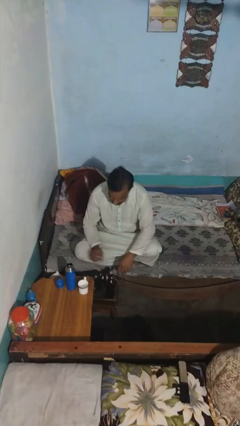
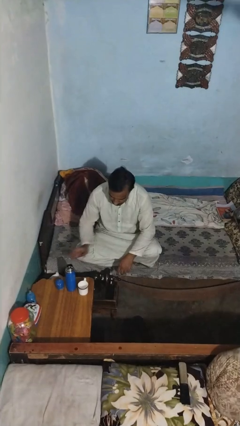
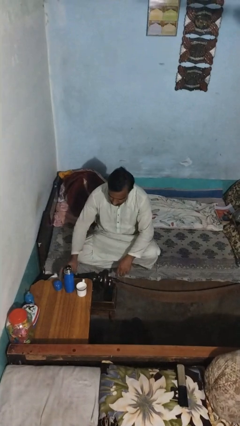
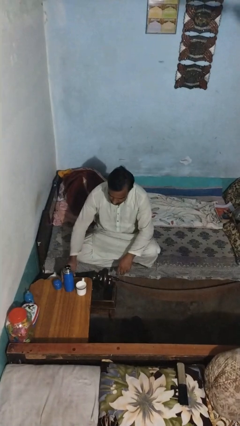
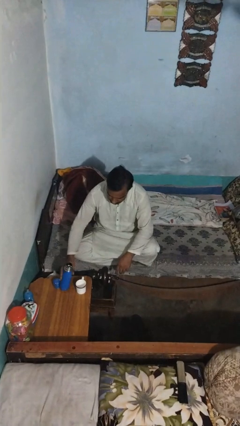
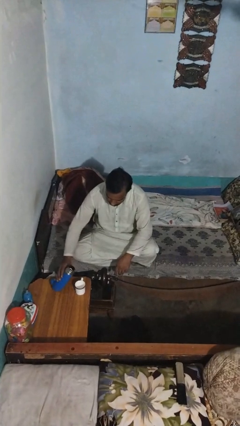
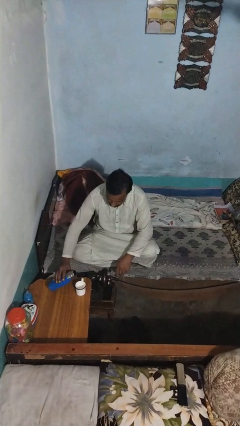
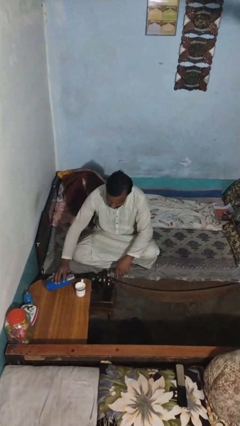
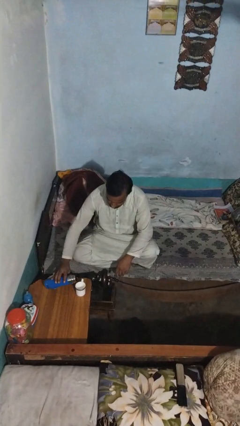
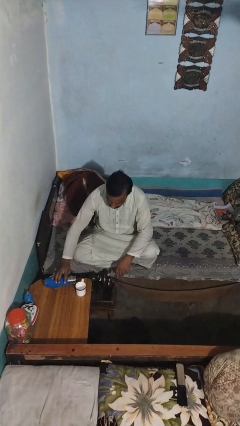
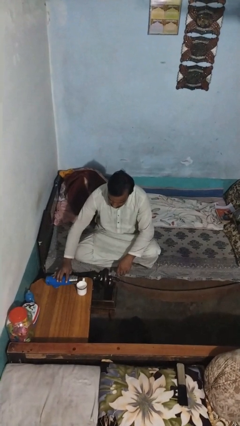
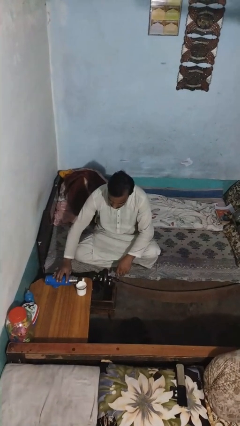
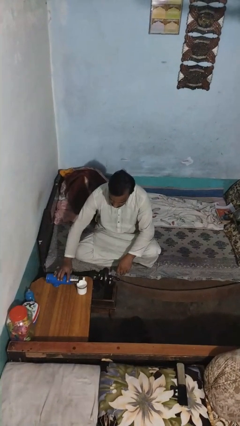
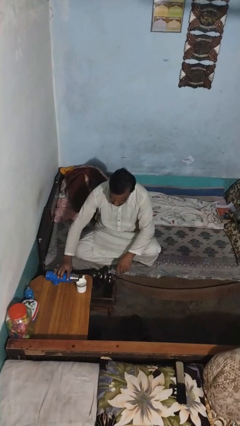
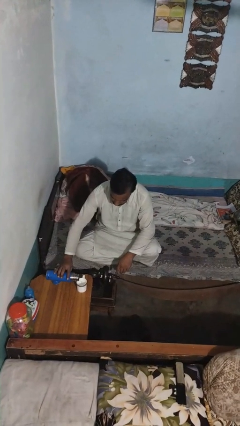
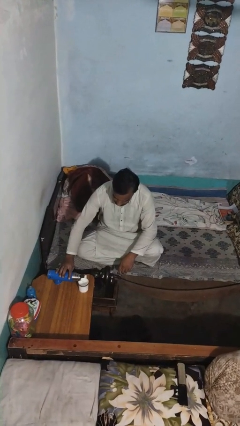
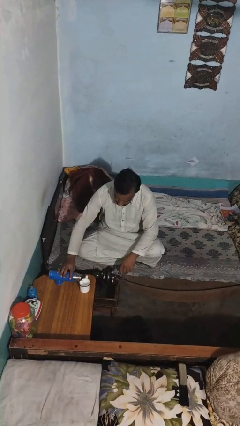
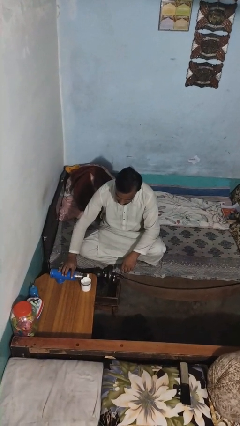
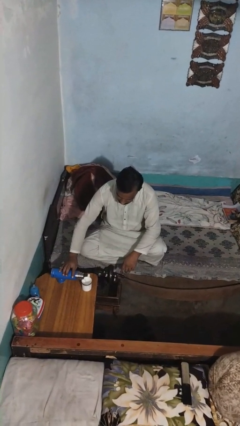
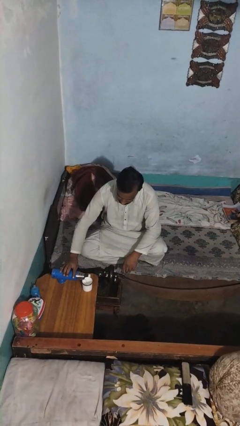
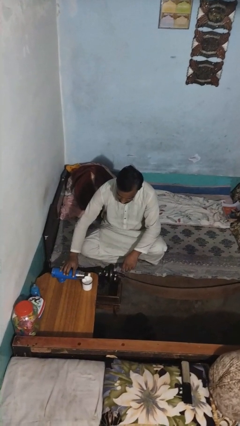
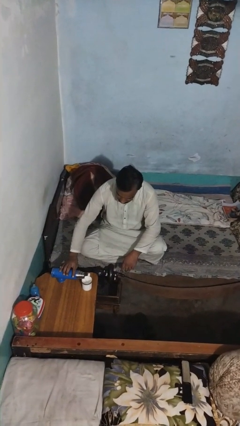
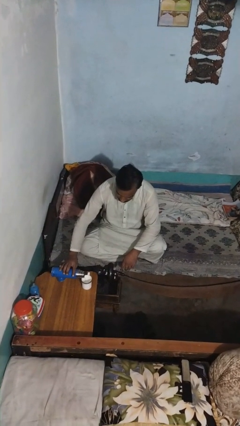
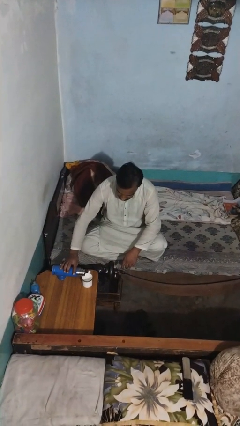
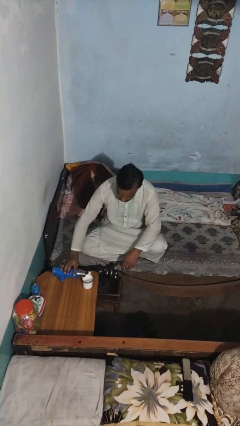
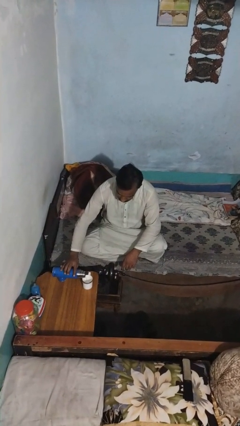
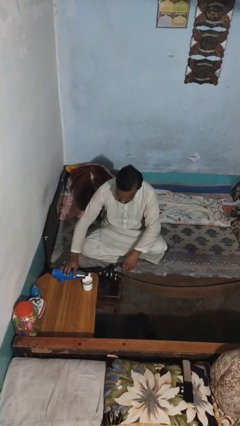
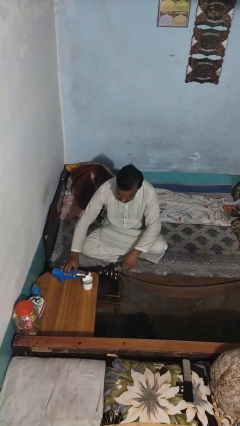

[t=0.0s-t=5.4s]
person pours liquid into cup

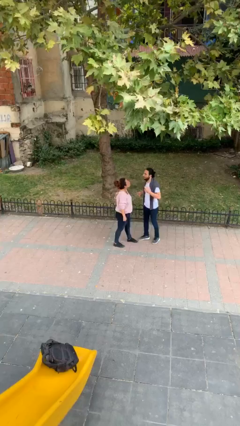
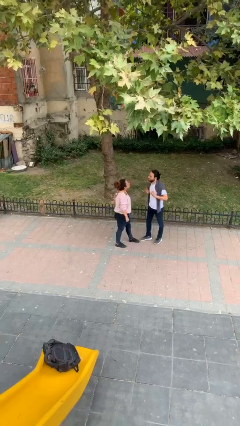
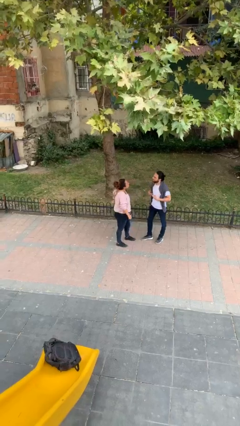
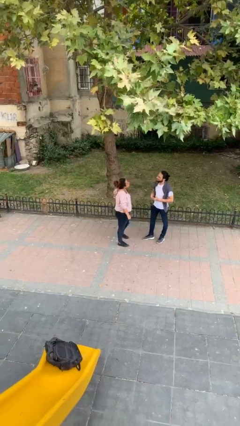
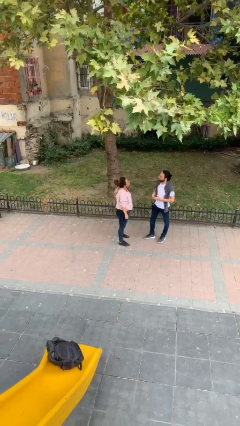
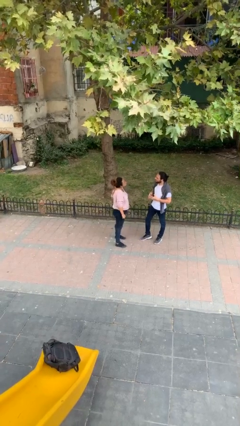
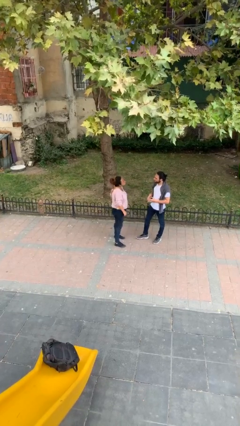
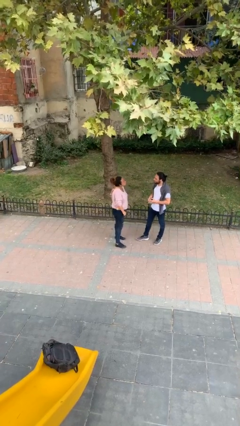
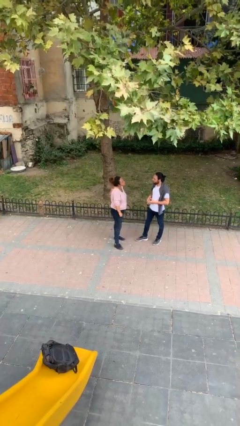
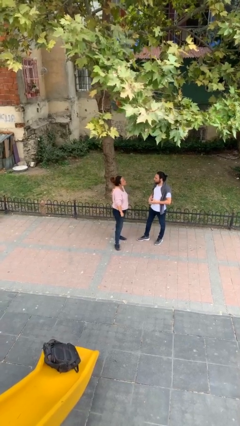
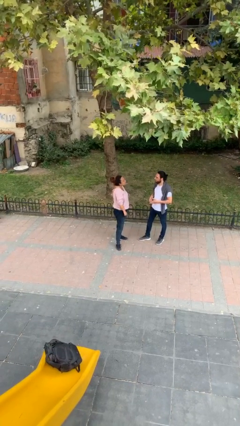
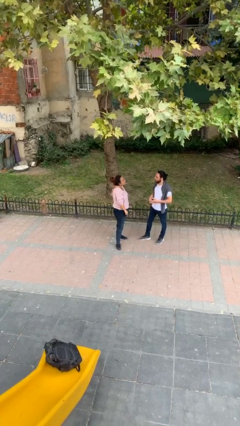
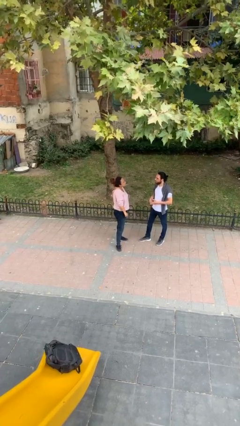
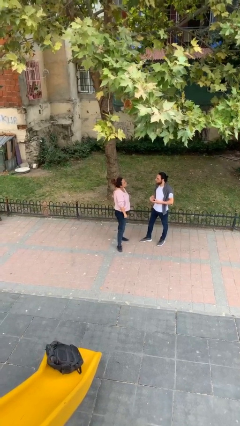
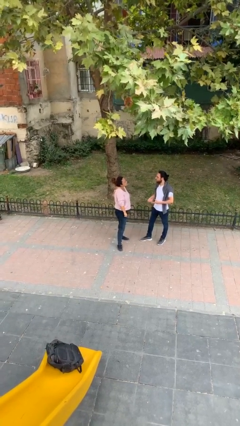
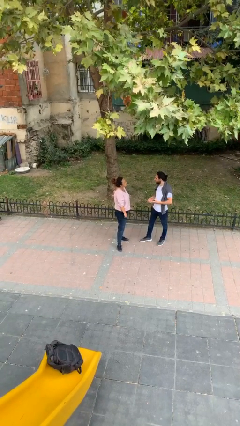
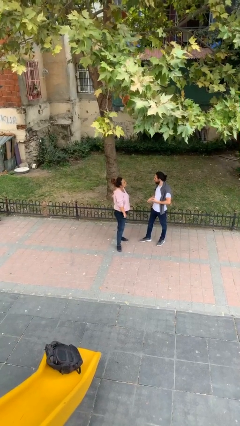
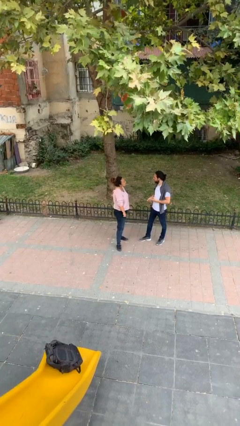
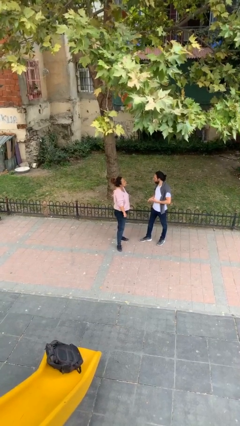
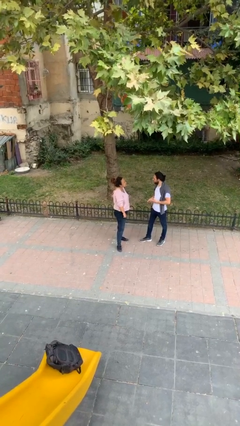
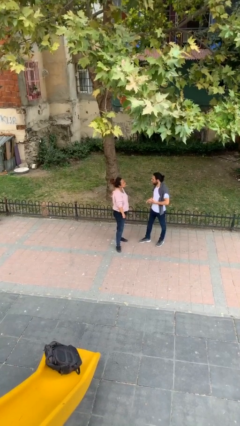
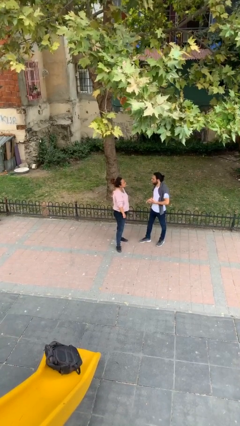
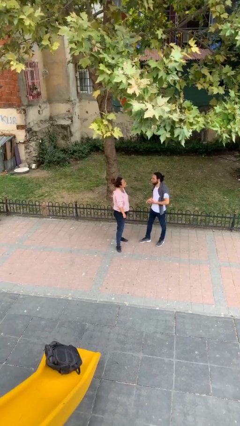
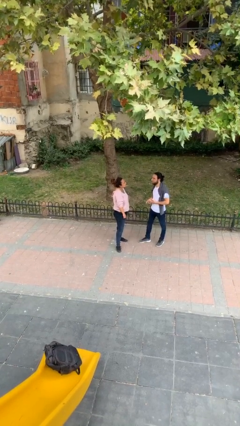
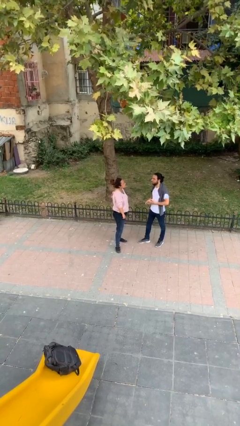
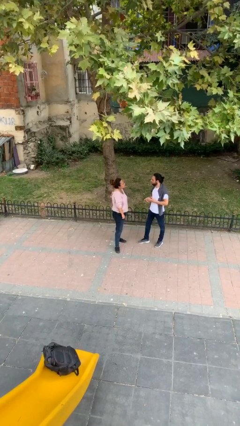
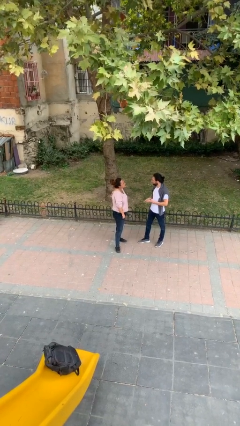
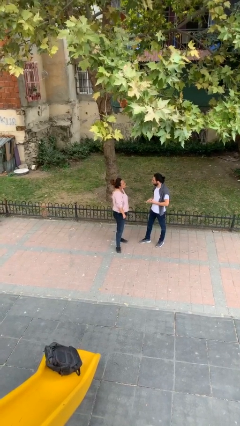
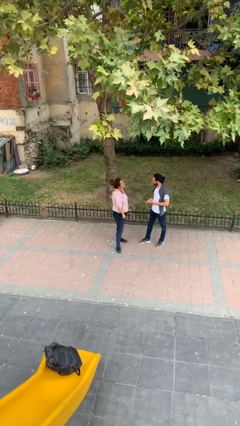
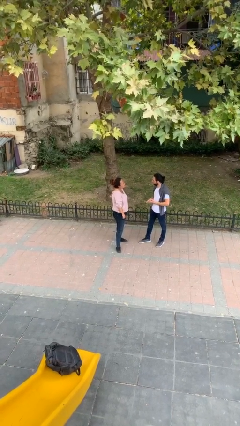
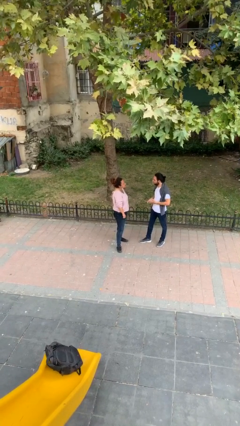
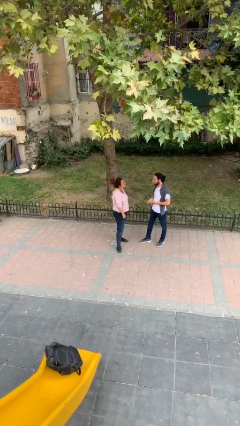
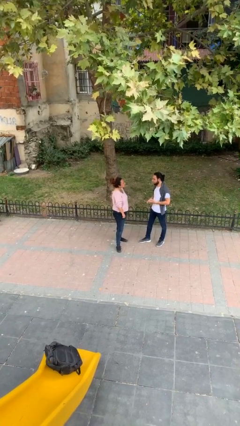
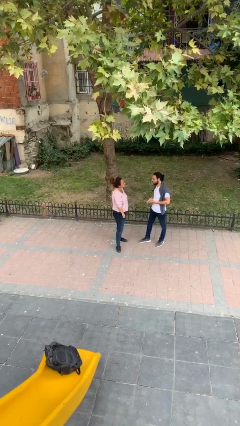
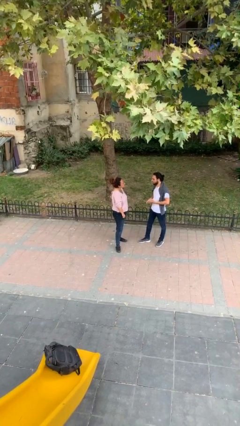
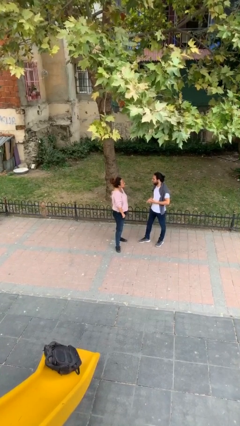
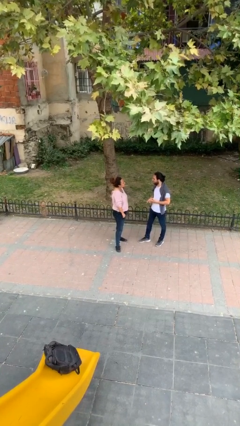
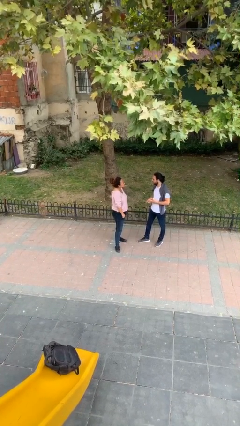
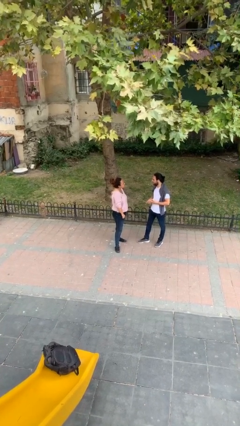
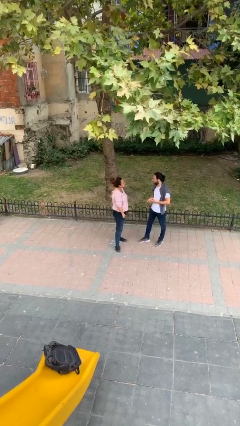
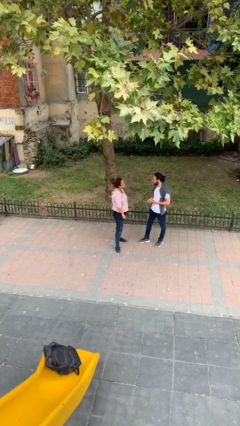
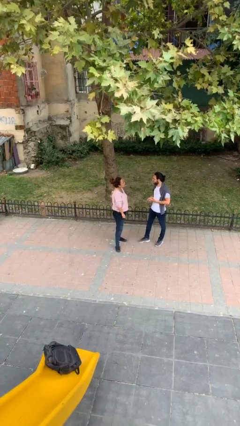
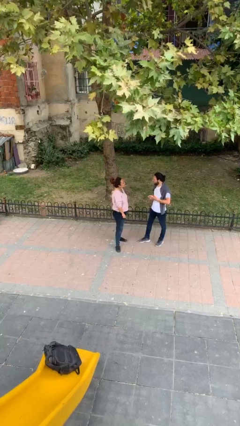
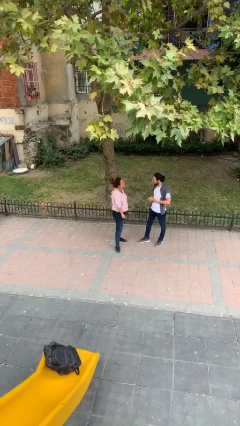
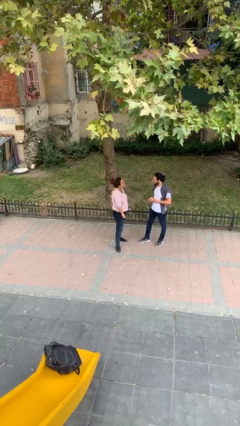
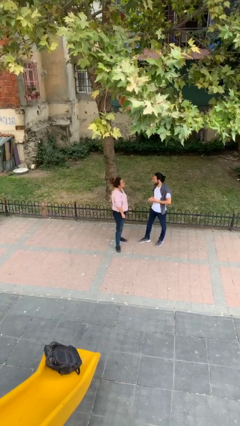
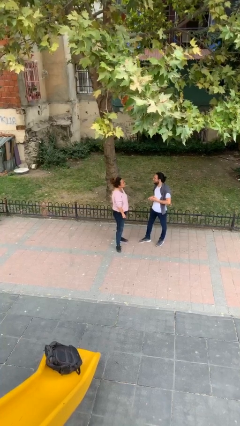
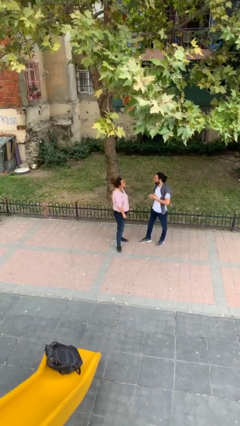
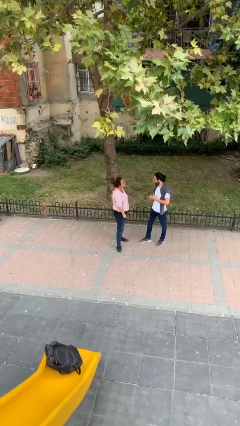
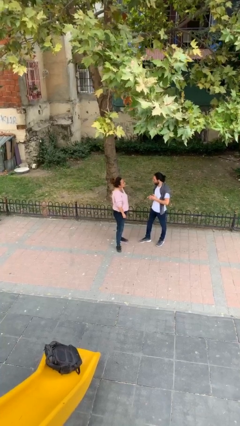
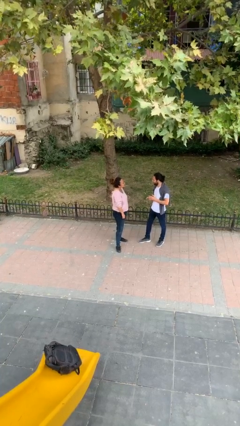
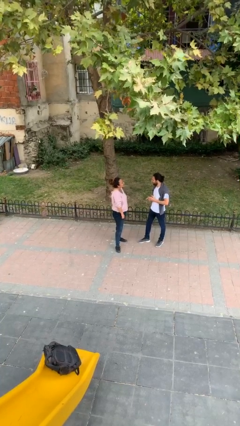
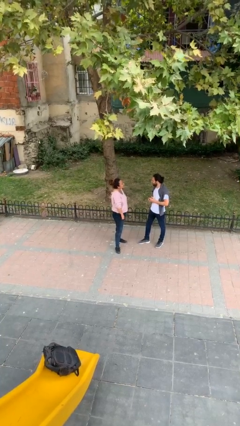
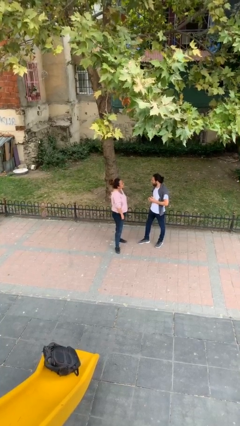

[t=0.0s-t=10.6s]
person talks to person

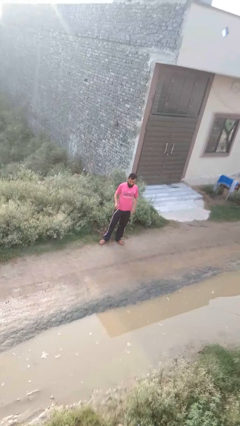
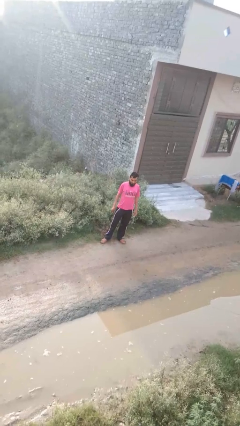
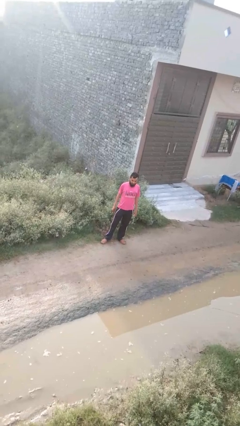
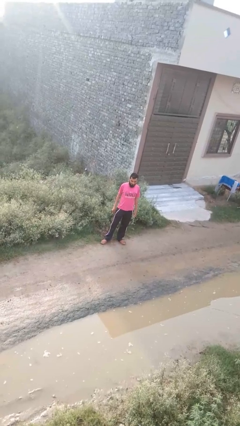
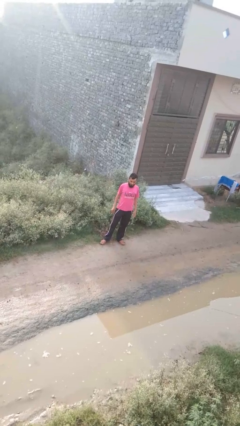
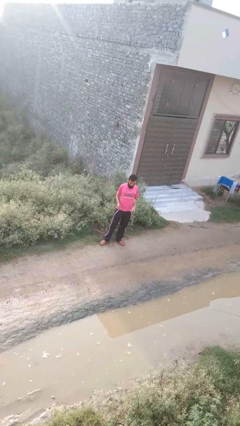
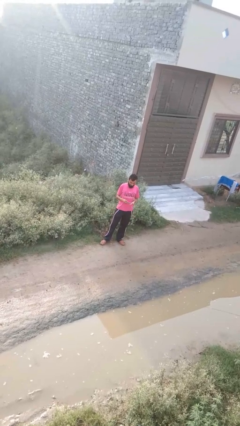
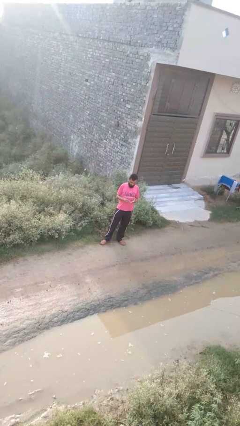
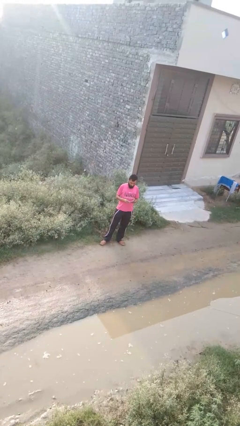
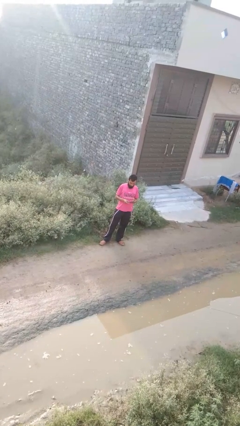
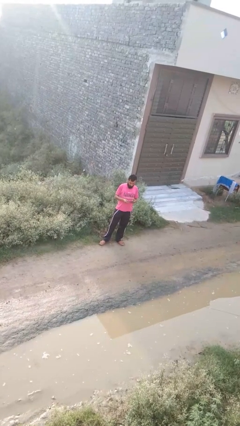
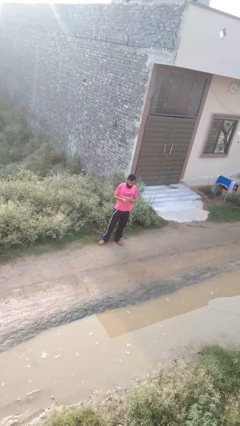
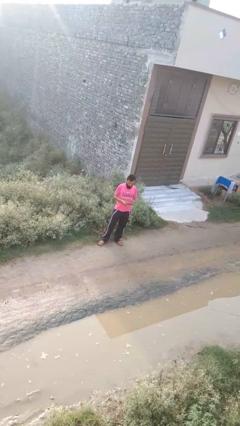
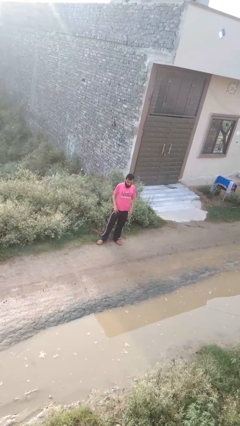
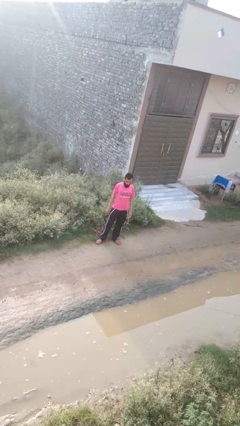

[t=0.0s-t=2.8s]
person puts on ring
